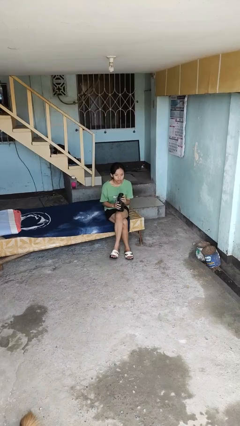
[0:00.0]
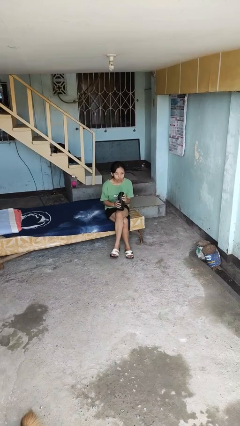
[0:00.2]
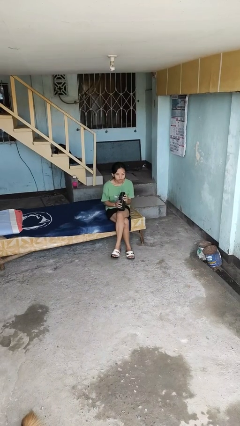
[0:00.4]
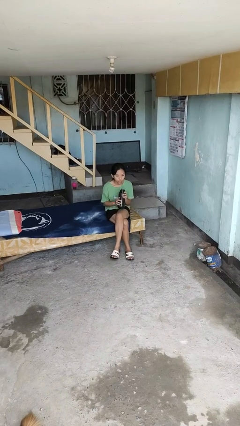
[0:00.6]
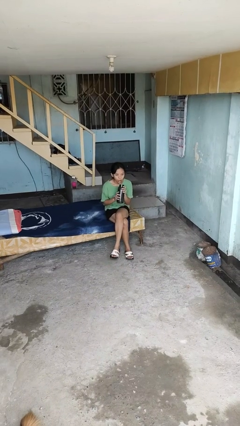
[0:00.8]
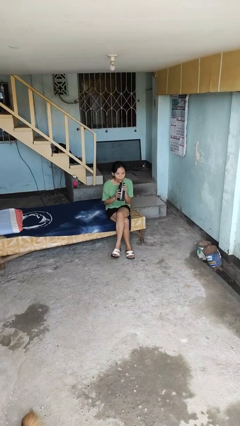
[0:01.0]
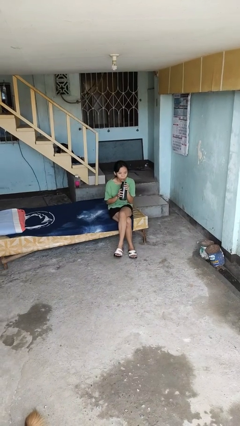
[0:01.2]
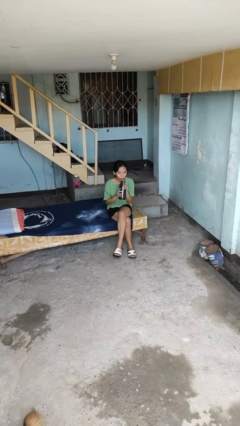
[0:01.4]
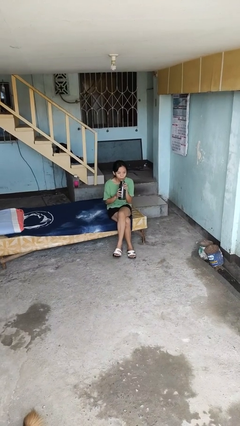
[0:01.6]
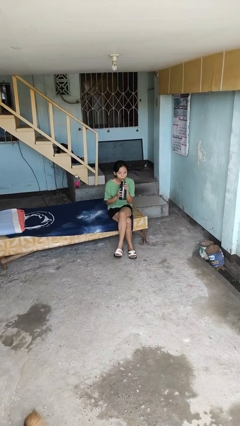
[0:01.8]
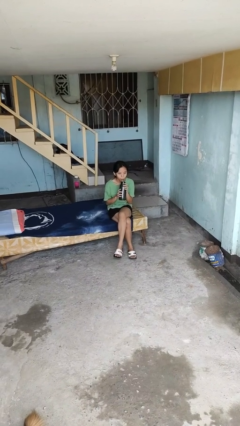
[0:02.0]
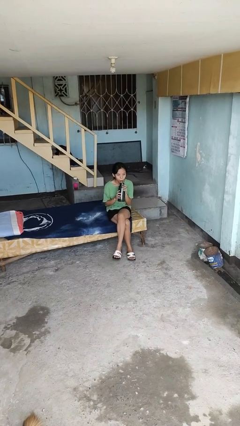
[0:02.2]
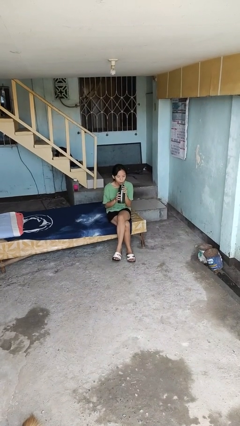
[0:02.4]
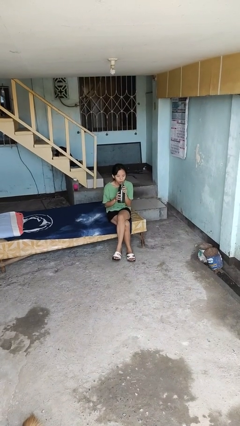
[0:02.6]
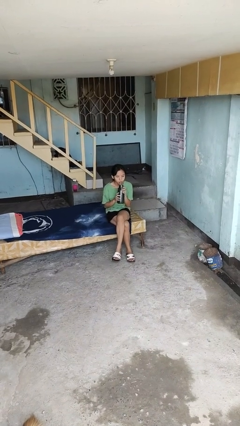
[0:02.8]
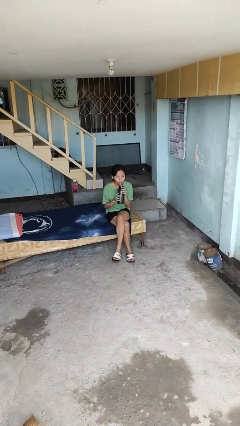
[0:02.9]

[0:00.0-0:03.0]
person drinks from straw

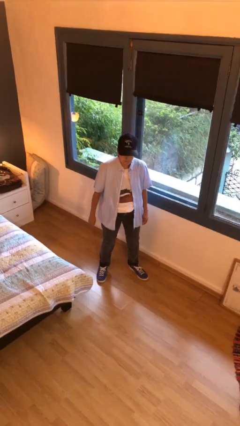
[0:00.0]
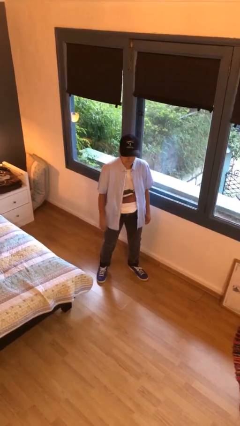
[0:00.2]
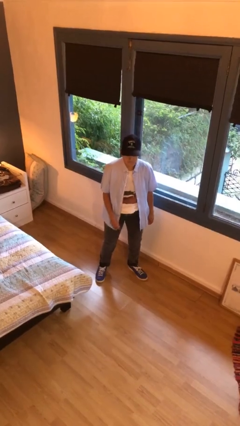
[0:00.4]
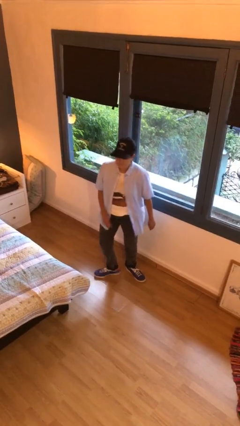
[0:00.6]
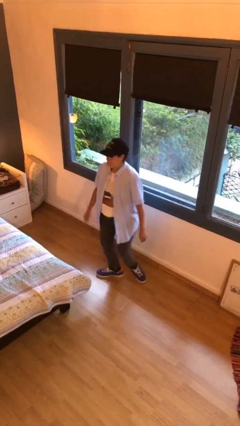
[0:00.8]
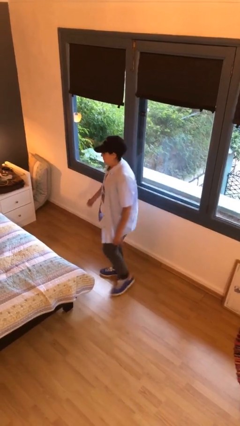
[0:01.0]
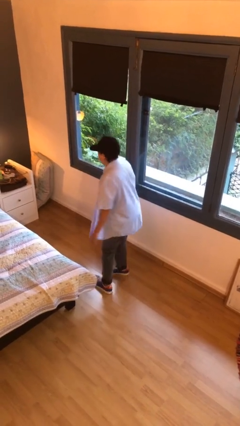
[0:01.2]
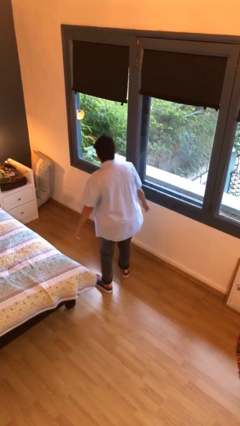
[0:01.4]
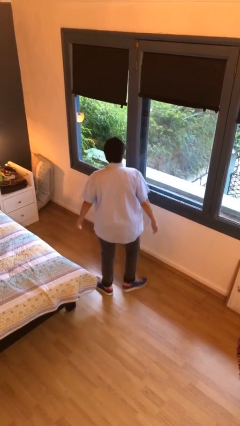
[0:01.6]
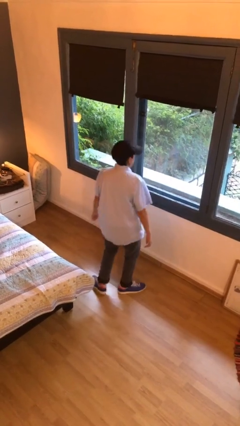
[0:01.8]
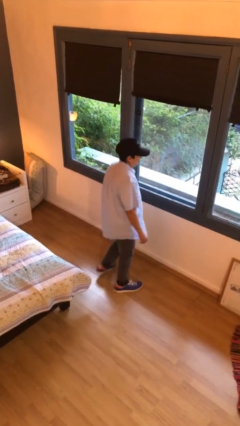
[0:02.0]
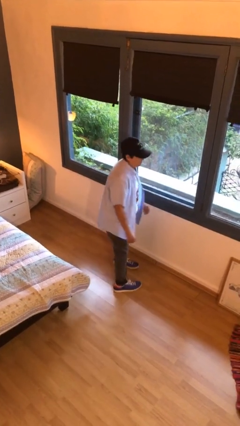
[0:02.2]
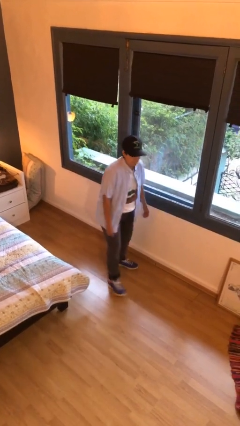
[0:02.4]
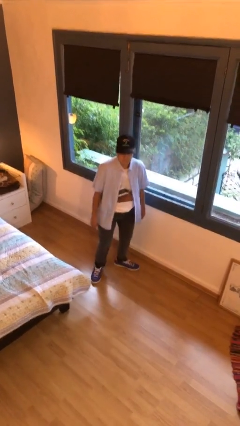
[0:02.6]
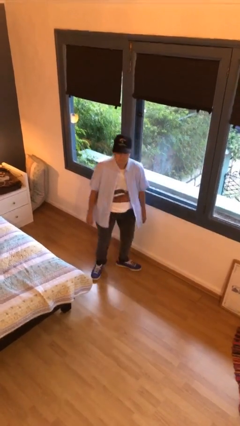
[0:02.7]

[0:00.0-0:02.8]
person twirls

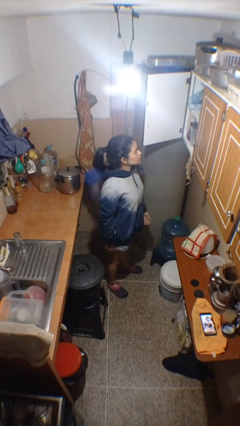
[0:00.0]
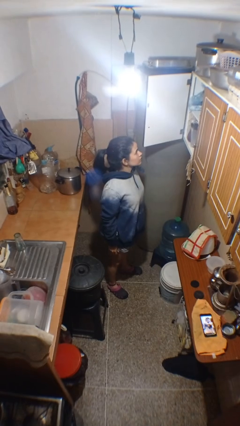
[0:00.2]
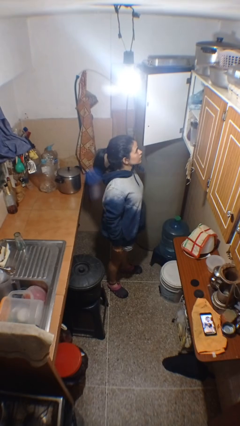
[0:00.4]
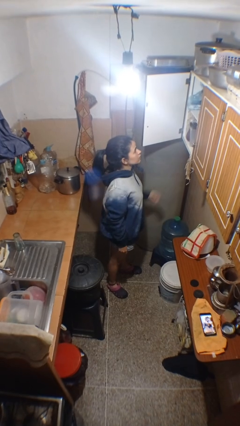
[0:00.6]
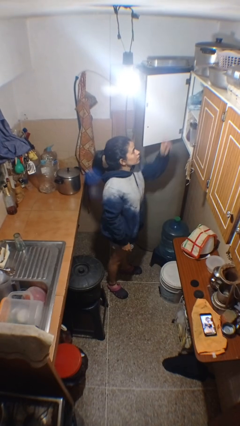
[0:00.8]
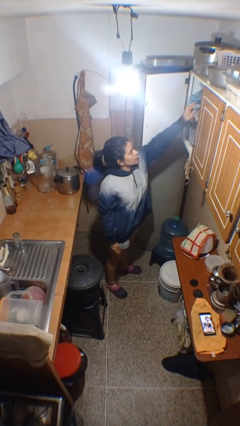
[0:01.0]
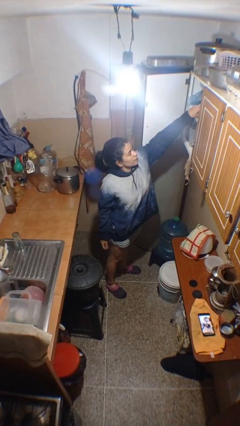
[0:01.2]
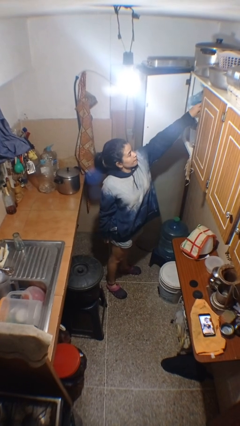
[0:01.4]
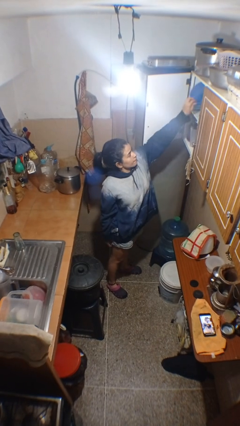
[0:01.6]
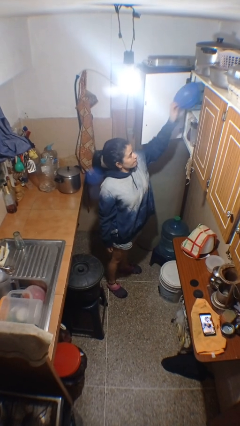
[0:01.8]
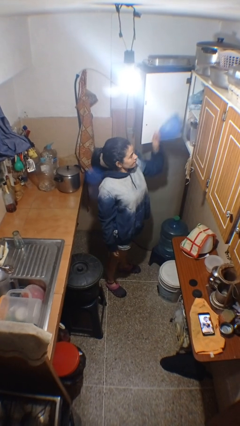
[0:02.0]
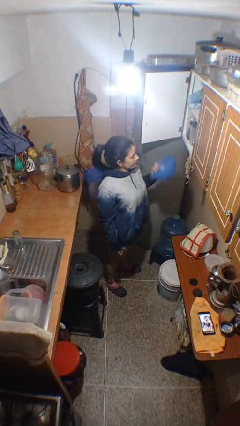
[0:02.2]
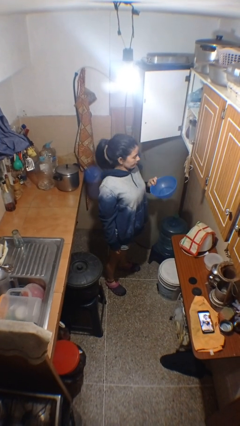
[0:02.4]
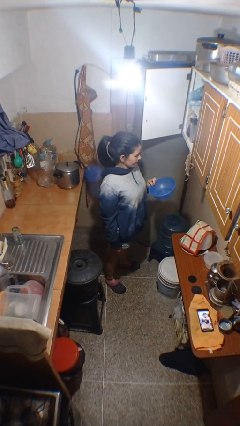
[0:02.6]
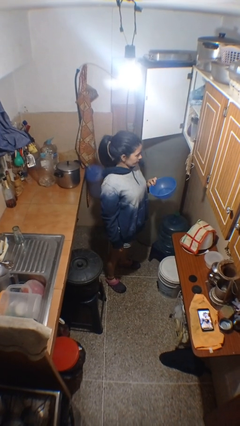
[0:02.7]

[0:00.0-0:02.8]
person picks up object from cabinet

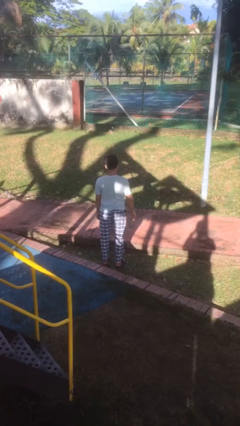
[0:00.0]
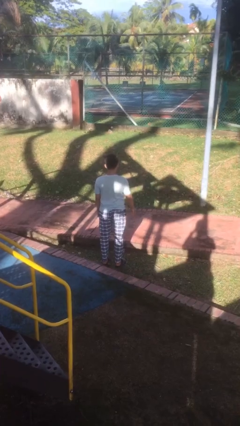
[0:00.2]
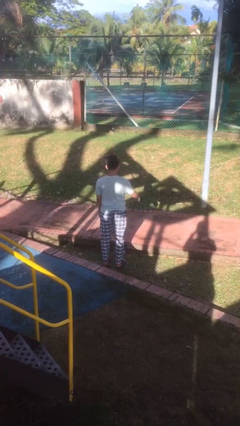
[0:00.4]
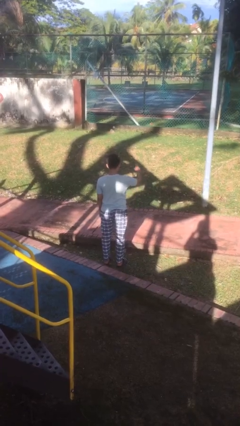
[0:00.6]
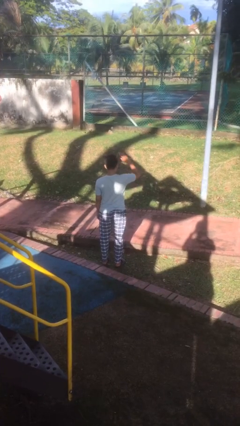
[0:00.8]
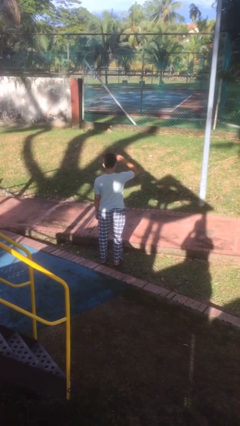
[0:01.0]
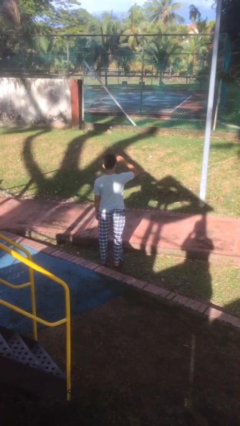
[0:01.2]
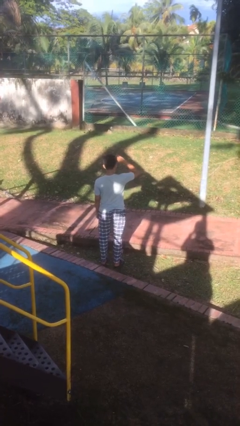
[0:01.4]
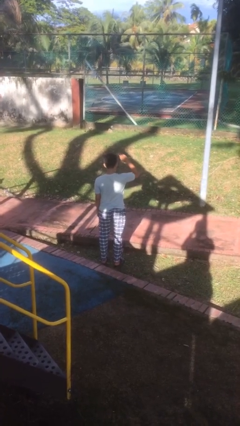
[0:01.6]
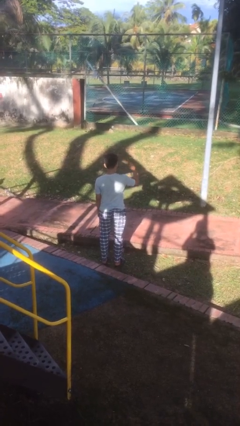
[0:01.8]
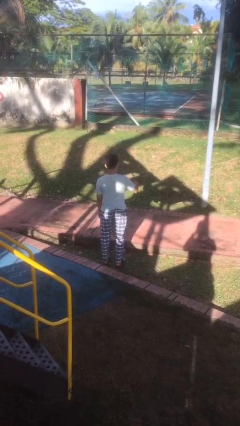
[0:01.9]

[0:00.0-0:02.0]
person salutes

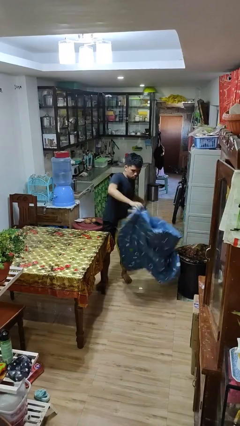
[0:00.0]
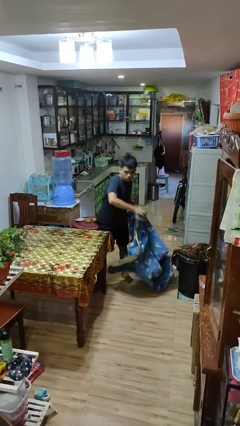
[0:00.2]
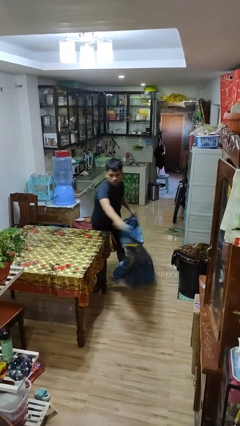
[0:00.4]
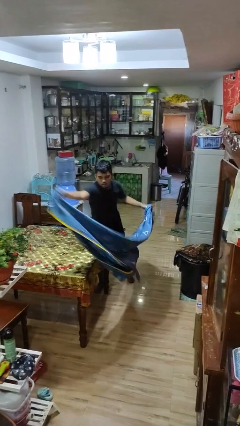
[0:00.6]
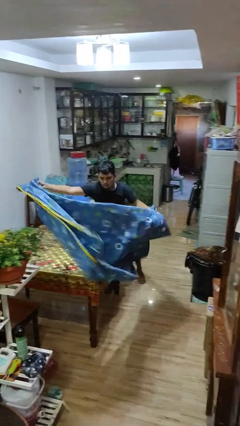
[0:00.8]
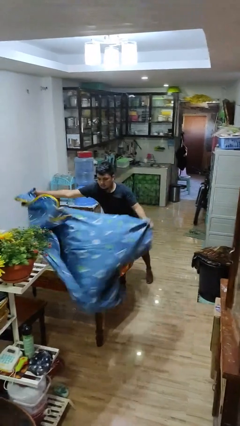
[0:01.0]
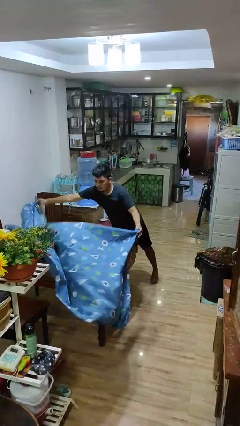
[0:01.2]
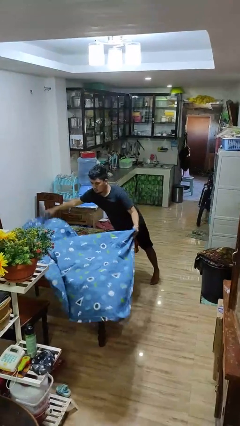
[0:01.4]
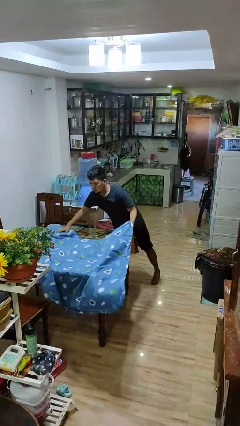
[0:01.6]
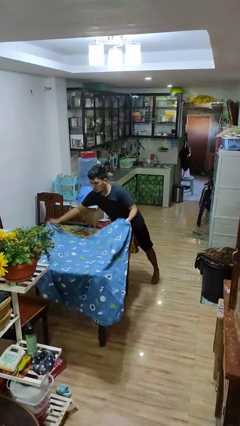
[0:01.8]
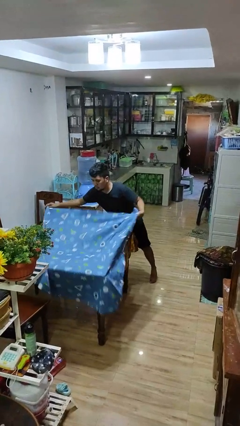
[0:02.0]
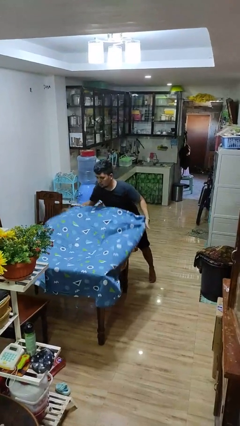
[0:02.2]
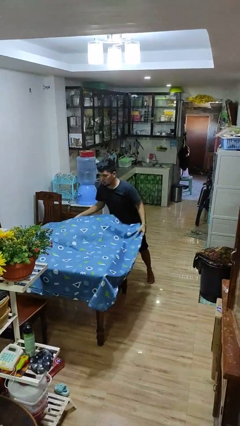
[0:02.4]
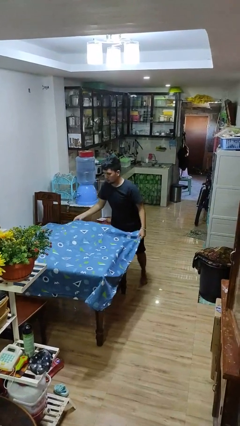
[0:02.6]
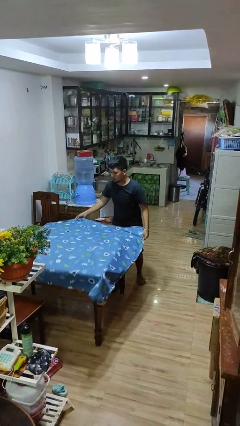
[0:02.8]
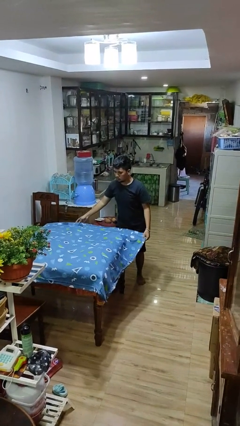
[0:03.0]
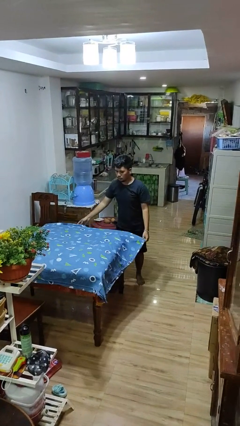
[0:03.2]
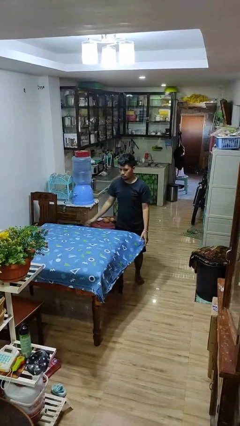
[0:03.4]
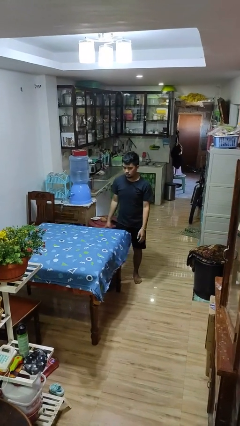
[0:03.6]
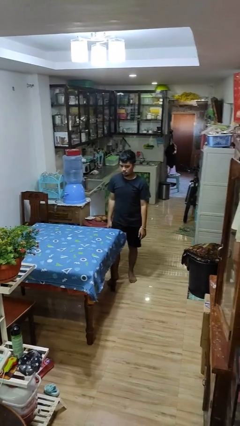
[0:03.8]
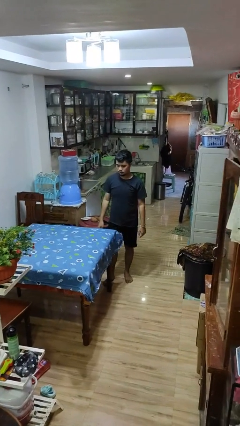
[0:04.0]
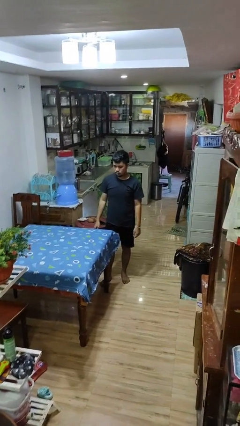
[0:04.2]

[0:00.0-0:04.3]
person spreads tablecloth

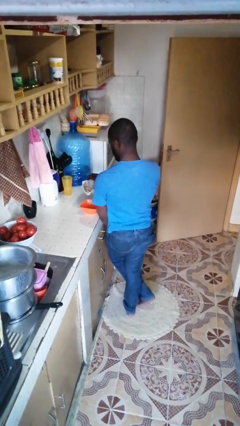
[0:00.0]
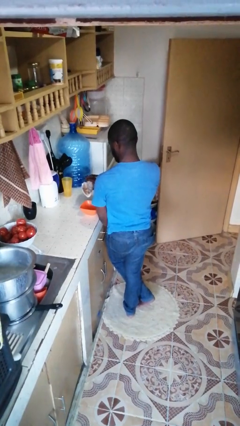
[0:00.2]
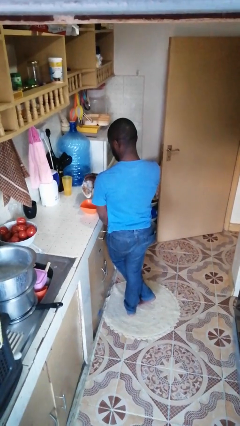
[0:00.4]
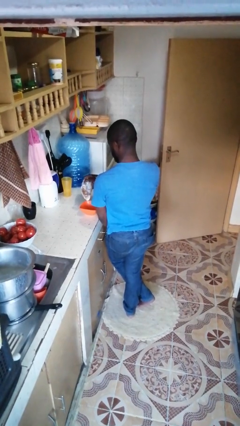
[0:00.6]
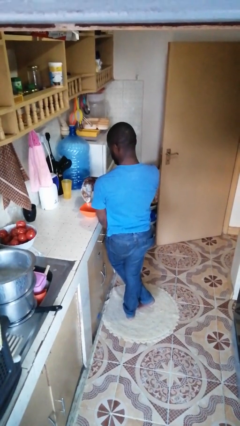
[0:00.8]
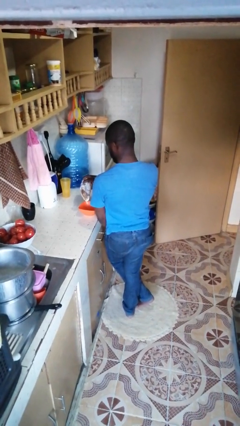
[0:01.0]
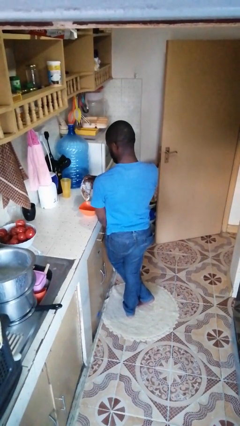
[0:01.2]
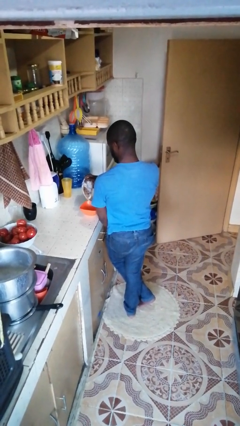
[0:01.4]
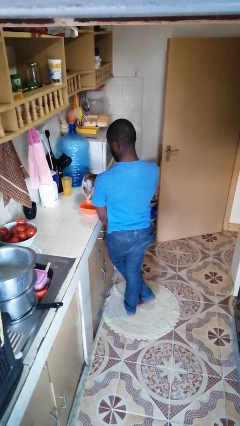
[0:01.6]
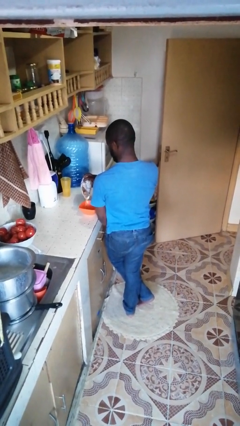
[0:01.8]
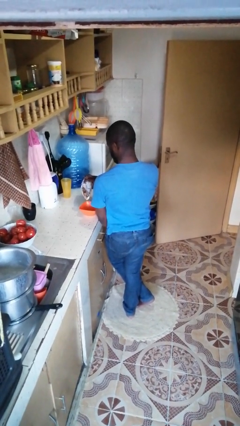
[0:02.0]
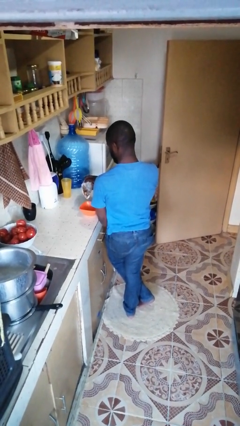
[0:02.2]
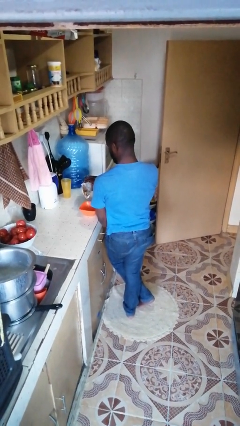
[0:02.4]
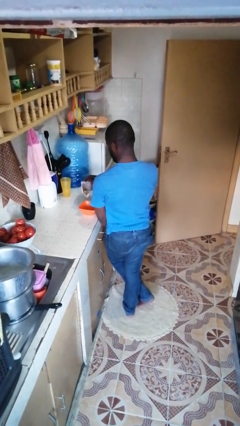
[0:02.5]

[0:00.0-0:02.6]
person pours into bowl
